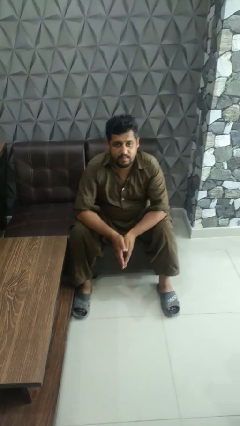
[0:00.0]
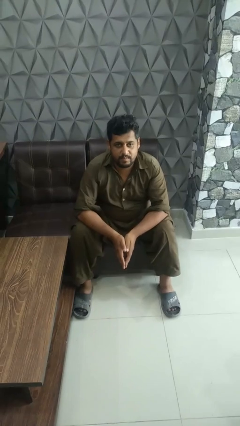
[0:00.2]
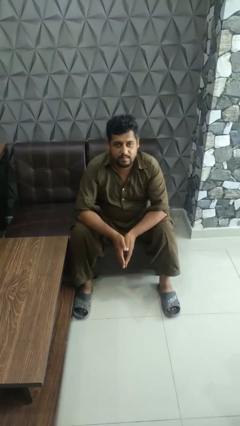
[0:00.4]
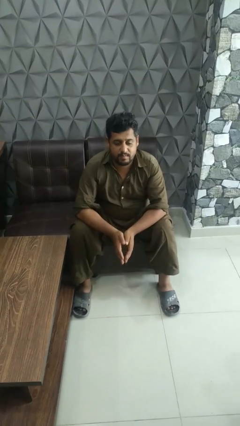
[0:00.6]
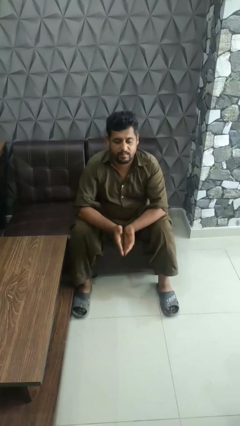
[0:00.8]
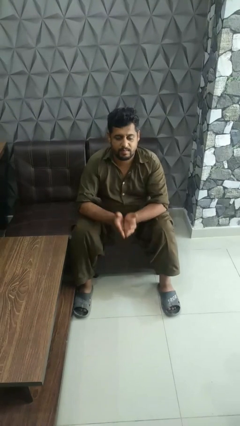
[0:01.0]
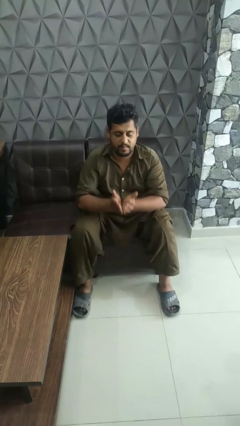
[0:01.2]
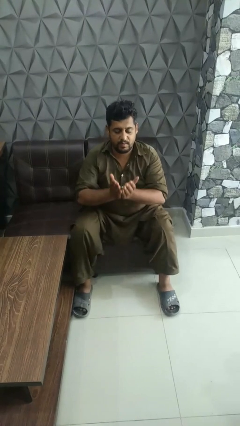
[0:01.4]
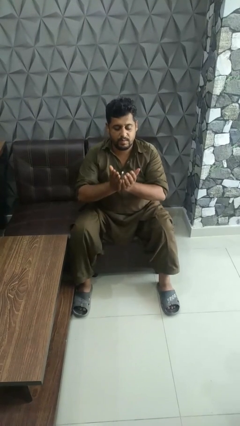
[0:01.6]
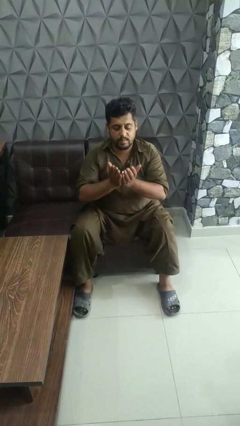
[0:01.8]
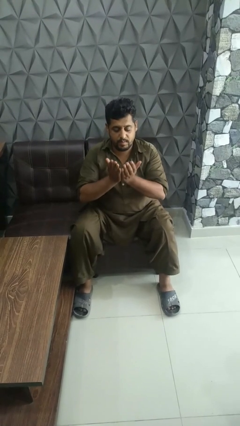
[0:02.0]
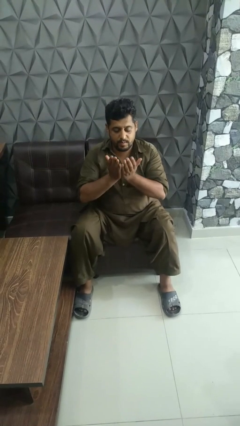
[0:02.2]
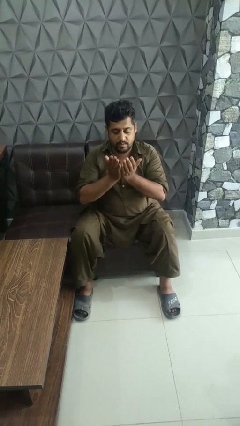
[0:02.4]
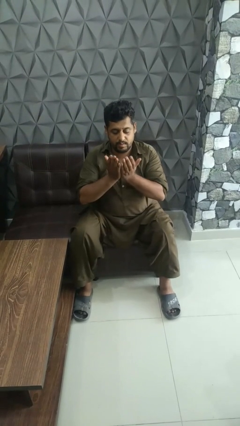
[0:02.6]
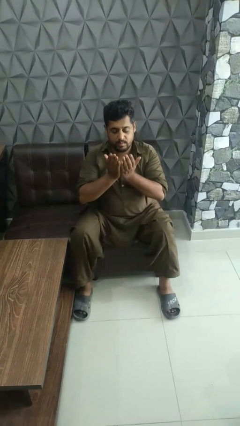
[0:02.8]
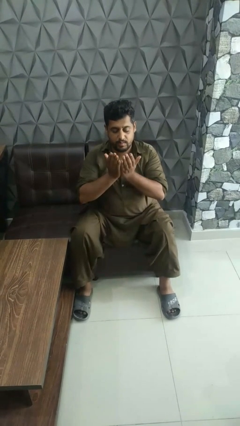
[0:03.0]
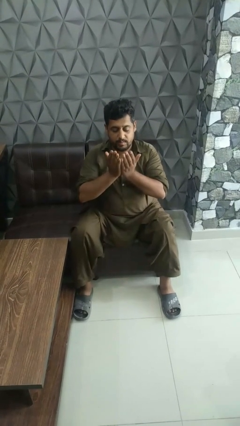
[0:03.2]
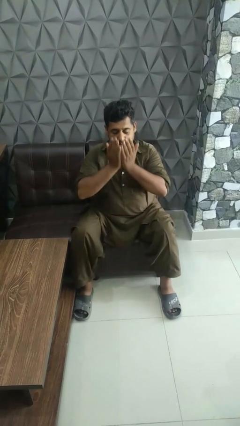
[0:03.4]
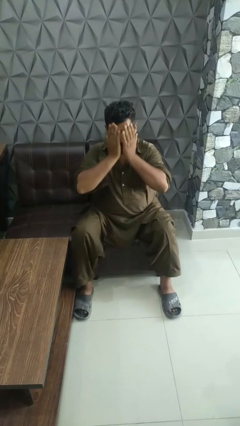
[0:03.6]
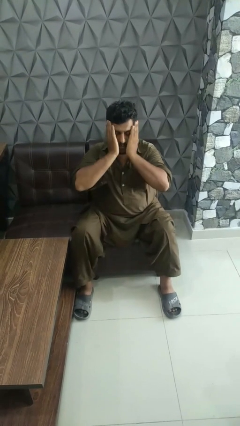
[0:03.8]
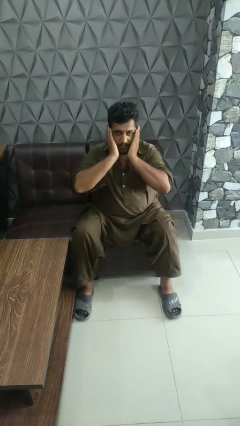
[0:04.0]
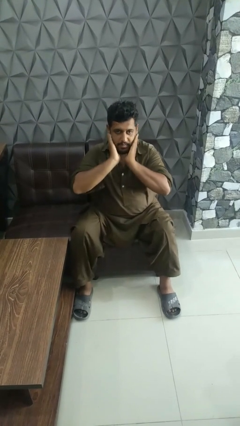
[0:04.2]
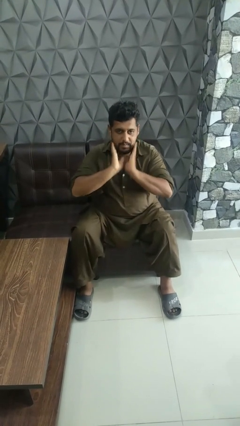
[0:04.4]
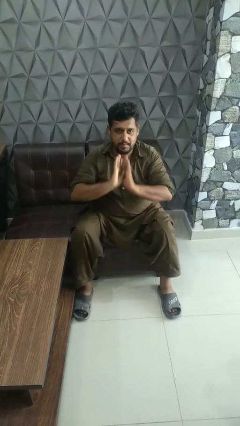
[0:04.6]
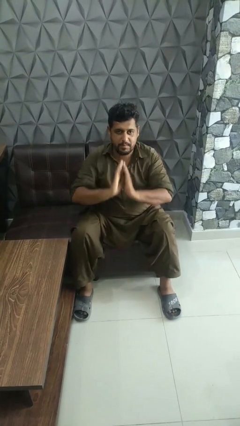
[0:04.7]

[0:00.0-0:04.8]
person prays

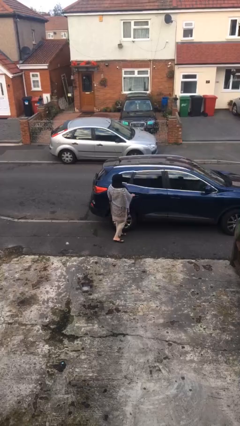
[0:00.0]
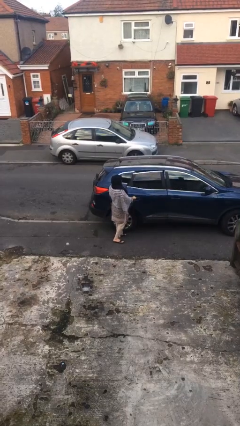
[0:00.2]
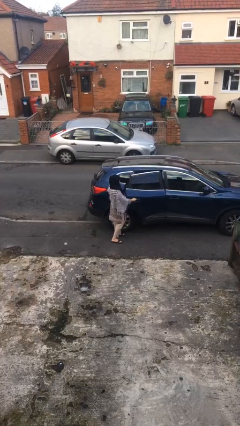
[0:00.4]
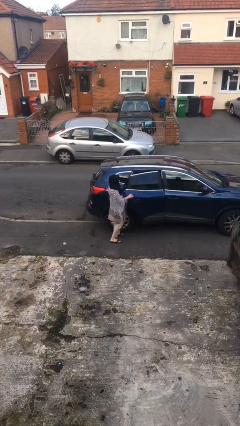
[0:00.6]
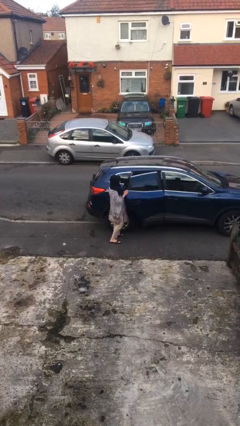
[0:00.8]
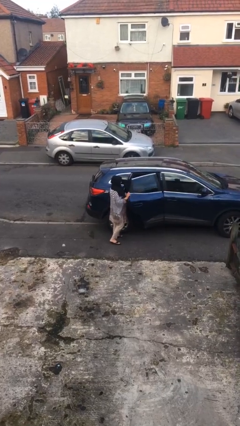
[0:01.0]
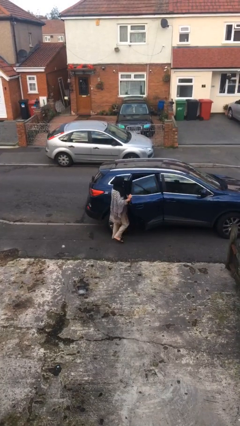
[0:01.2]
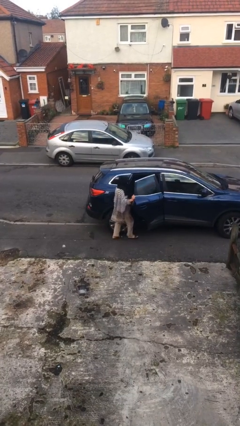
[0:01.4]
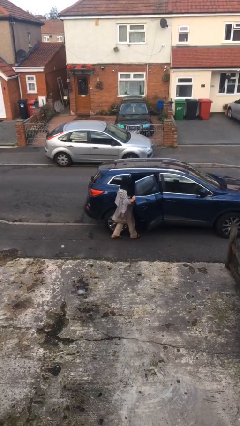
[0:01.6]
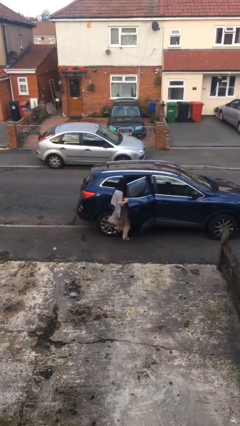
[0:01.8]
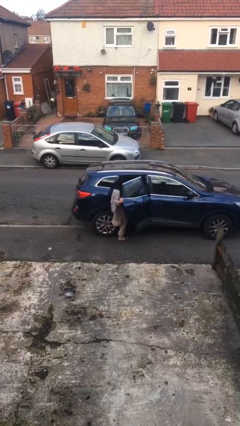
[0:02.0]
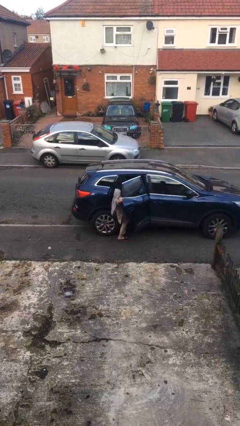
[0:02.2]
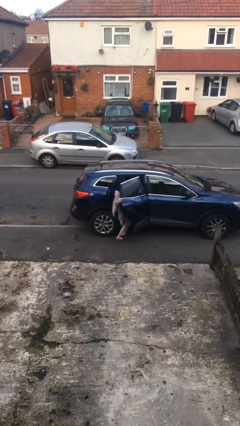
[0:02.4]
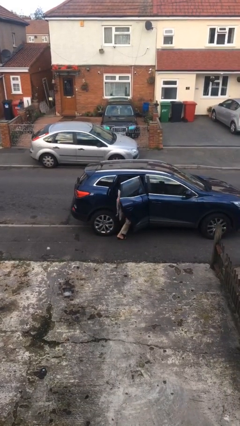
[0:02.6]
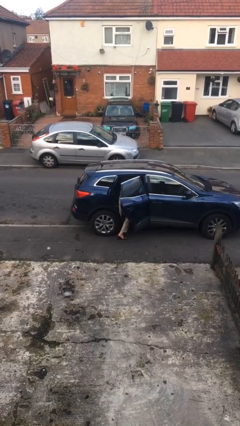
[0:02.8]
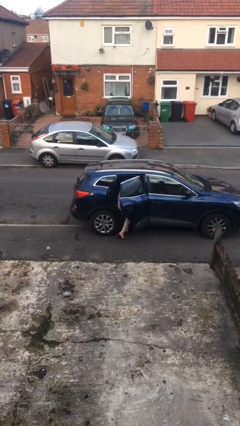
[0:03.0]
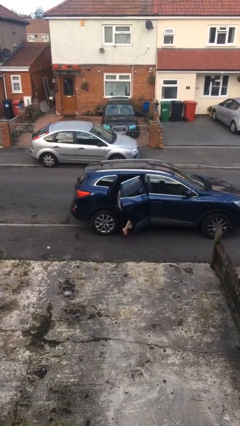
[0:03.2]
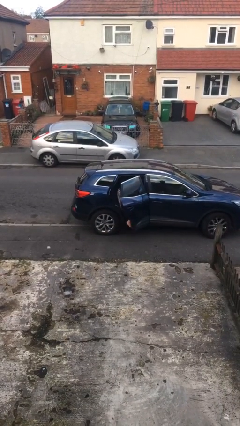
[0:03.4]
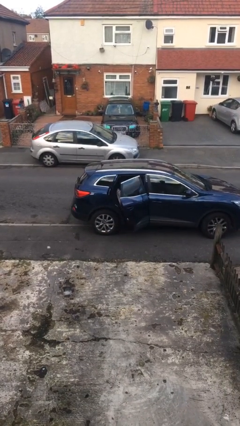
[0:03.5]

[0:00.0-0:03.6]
person enters car

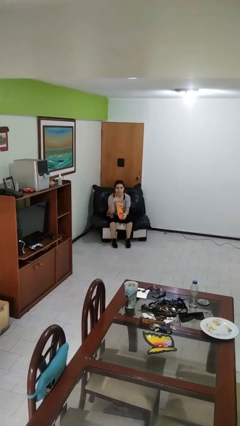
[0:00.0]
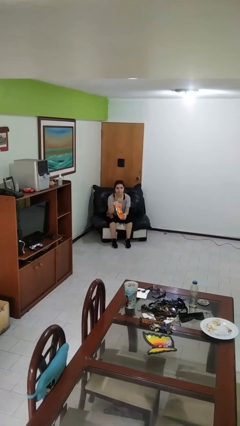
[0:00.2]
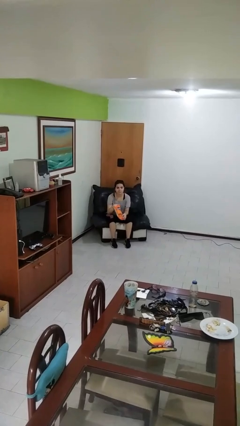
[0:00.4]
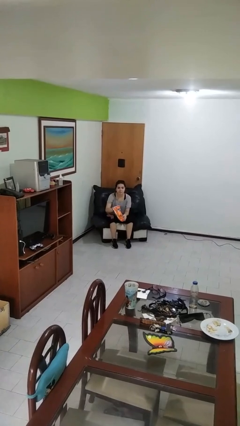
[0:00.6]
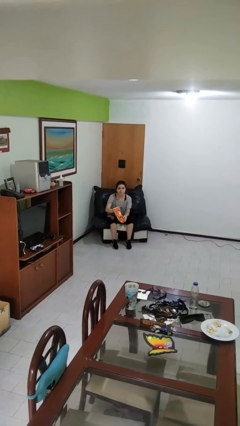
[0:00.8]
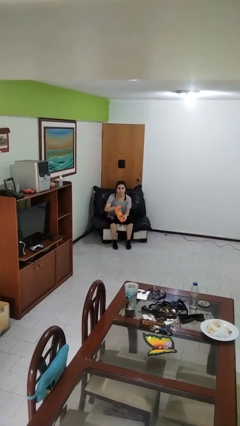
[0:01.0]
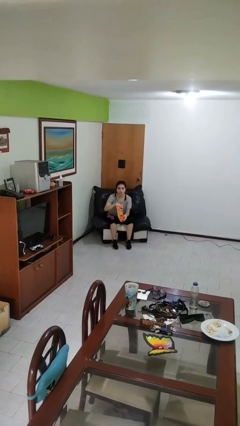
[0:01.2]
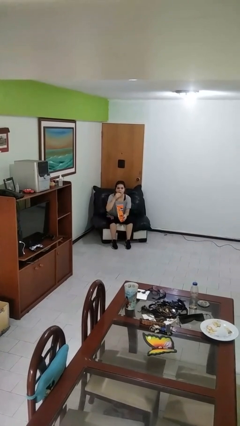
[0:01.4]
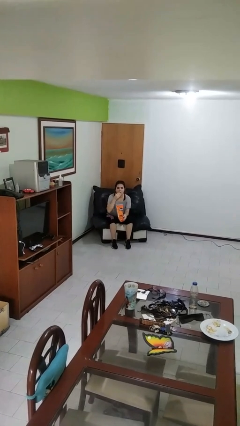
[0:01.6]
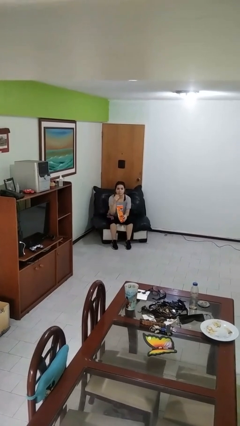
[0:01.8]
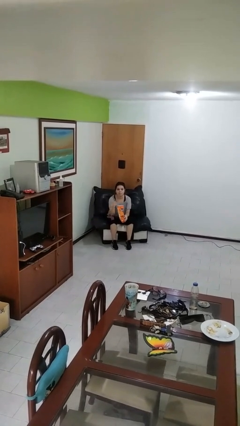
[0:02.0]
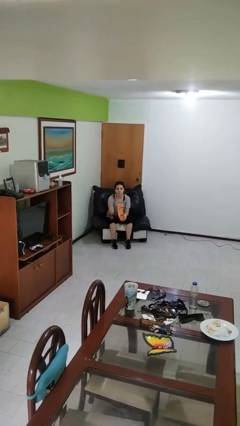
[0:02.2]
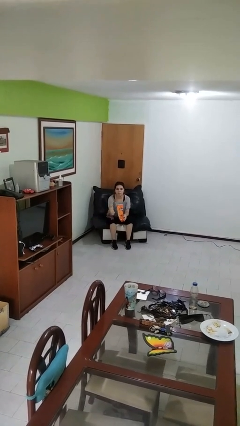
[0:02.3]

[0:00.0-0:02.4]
person eats snack from bag

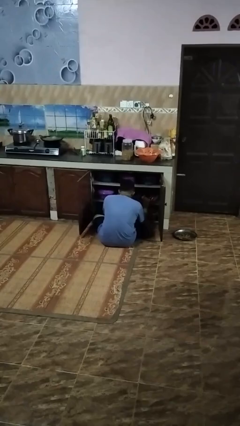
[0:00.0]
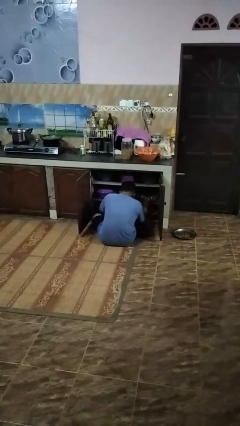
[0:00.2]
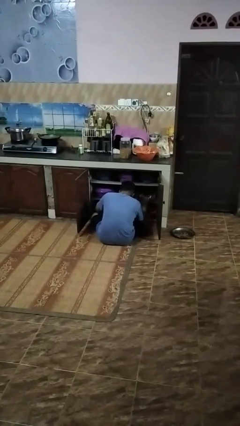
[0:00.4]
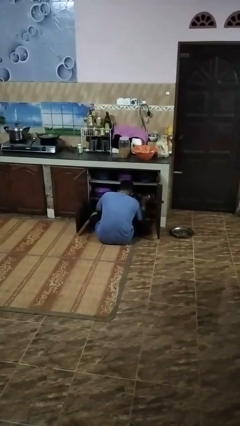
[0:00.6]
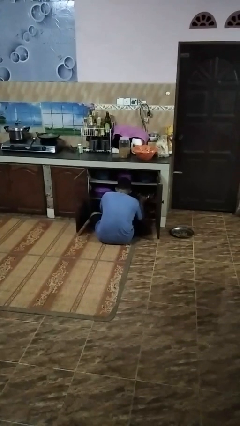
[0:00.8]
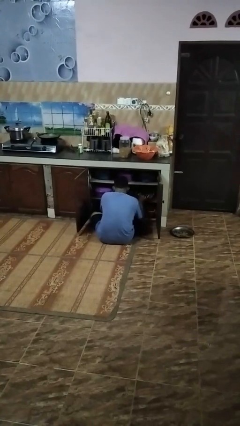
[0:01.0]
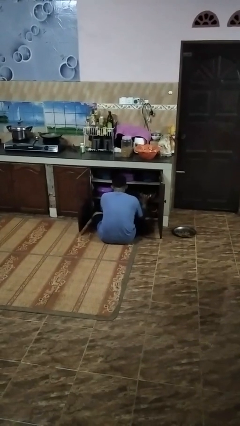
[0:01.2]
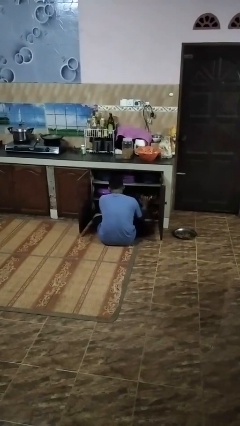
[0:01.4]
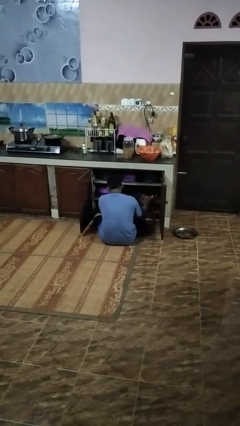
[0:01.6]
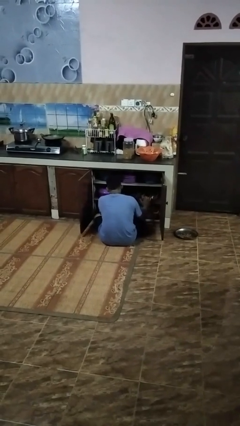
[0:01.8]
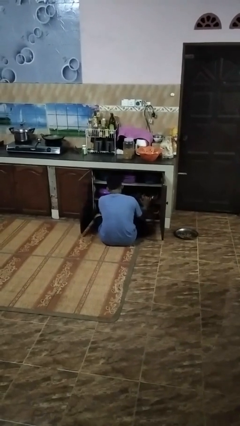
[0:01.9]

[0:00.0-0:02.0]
person searches in kitchen drawer

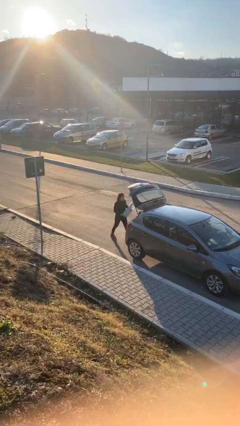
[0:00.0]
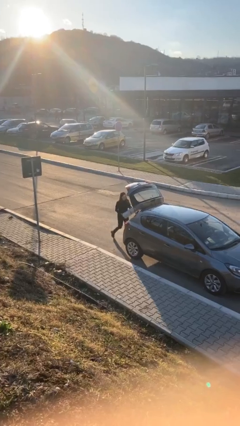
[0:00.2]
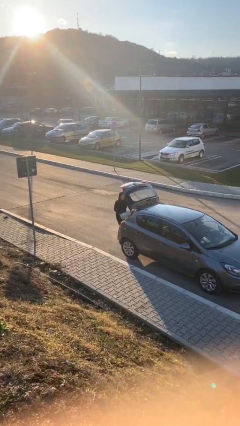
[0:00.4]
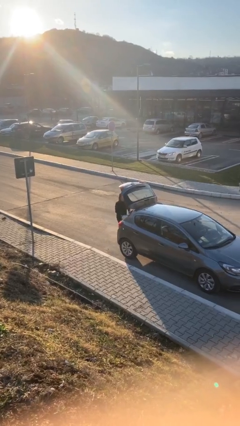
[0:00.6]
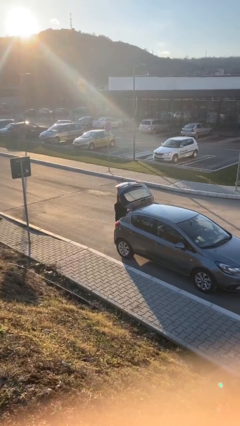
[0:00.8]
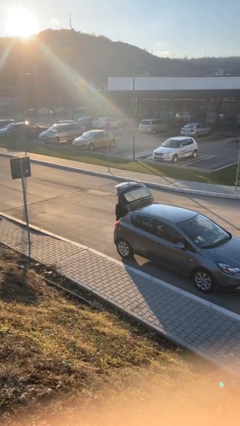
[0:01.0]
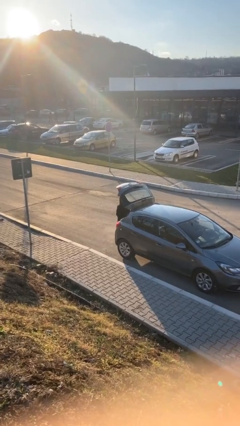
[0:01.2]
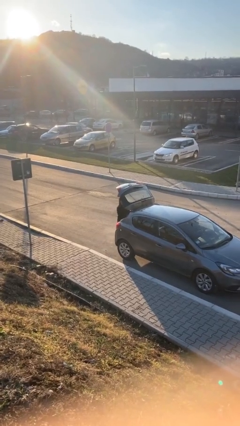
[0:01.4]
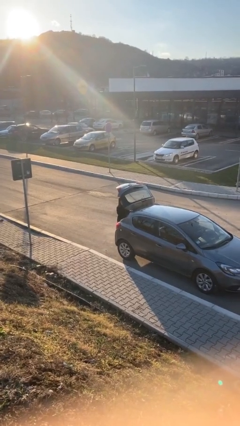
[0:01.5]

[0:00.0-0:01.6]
person loads car

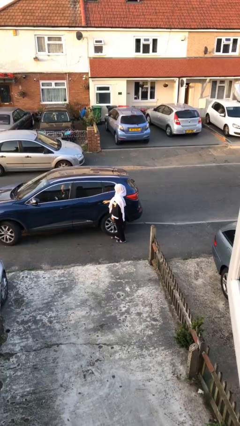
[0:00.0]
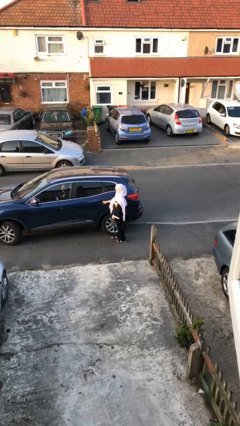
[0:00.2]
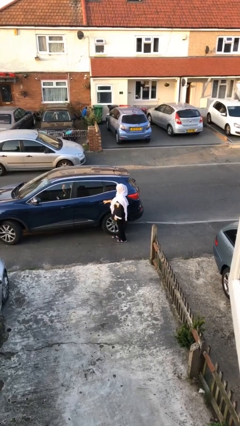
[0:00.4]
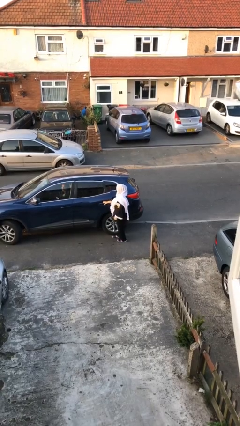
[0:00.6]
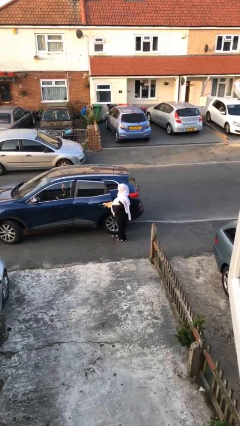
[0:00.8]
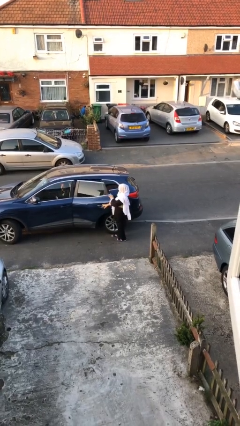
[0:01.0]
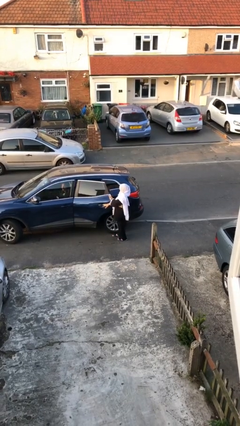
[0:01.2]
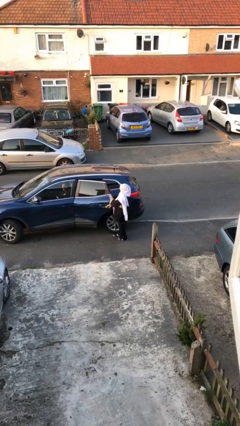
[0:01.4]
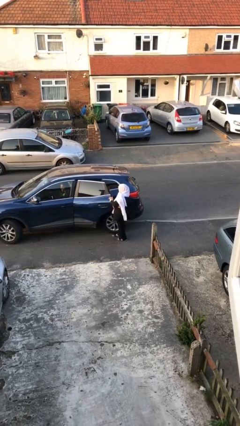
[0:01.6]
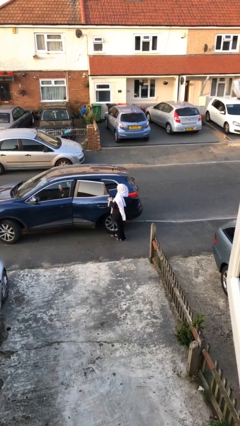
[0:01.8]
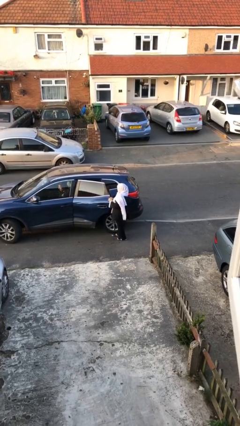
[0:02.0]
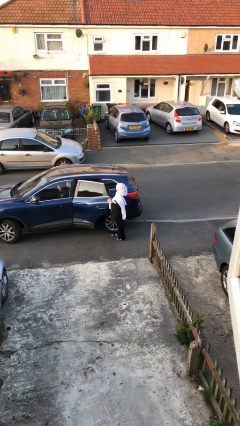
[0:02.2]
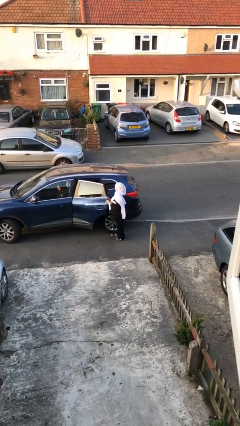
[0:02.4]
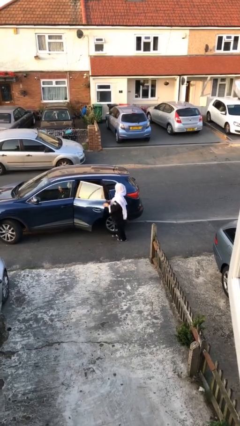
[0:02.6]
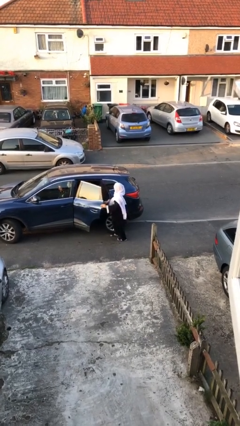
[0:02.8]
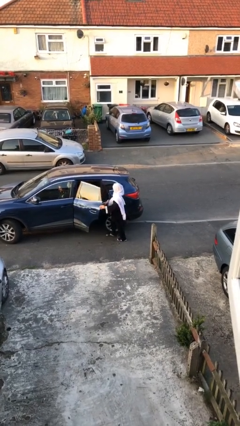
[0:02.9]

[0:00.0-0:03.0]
person opens car door

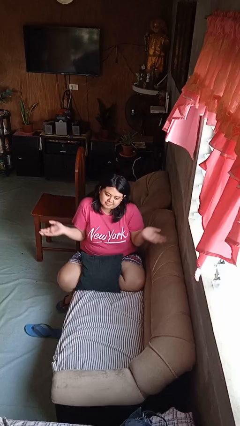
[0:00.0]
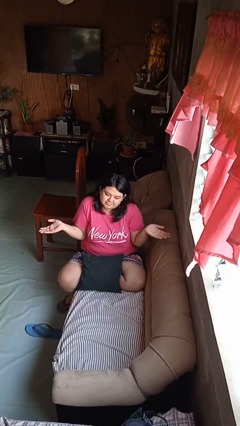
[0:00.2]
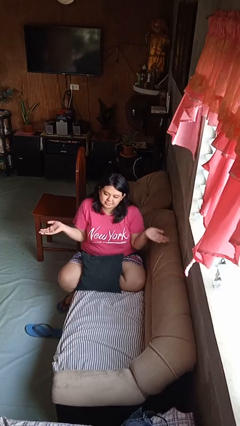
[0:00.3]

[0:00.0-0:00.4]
person shrugs
